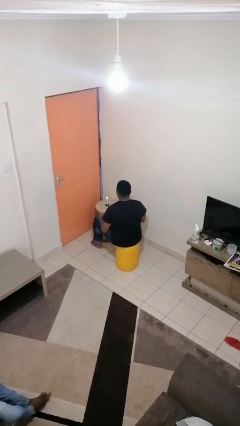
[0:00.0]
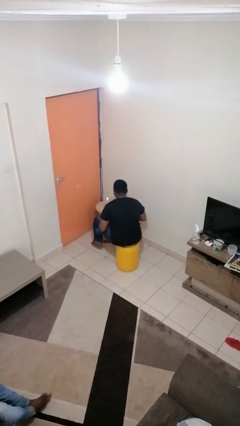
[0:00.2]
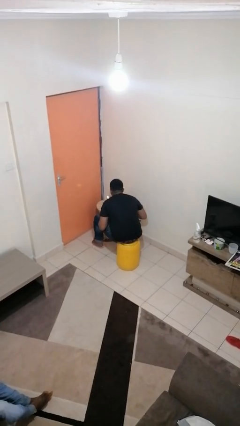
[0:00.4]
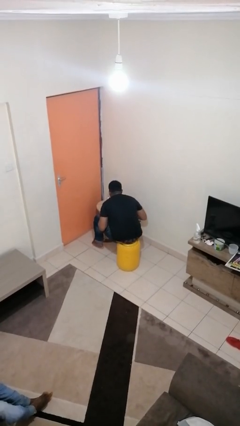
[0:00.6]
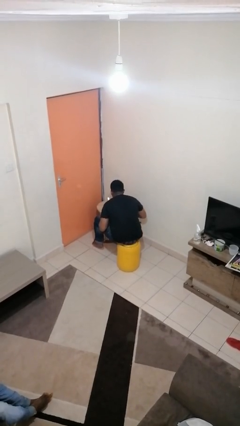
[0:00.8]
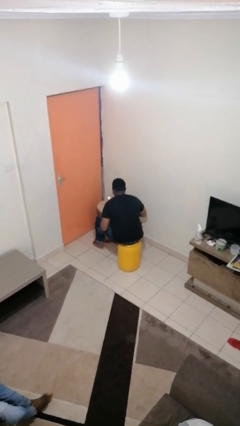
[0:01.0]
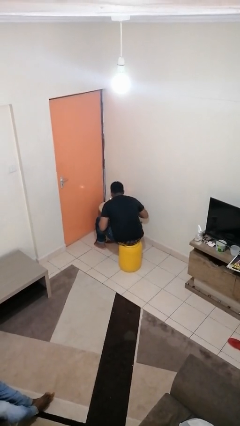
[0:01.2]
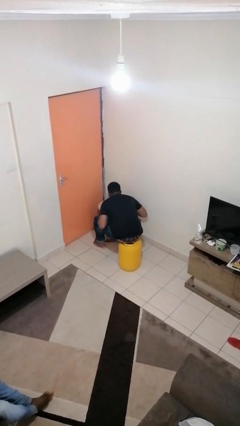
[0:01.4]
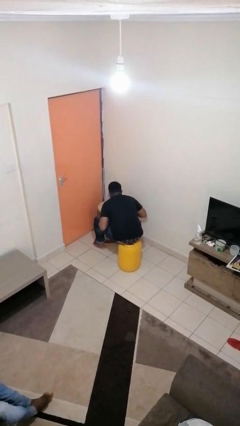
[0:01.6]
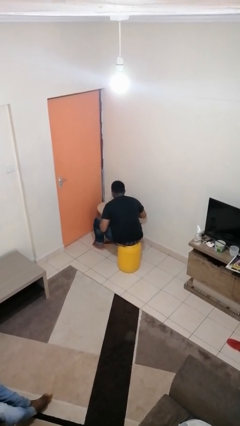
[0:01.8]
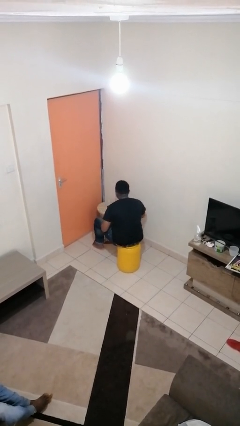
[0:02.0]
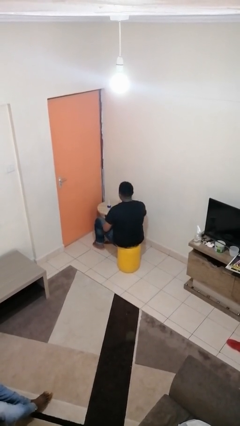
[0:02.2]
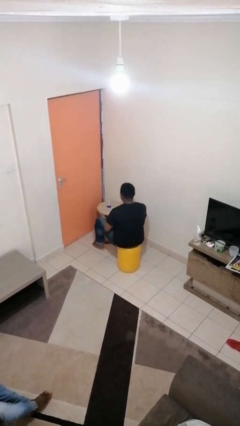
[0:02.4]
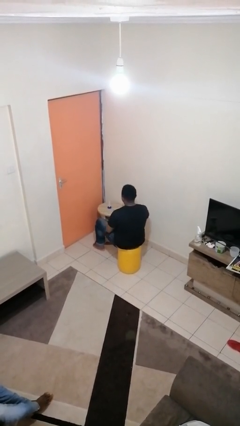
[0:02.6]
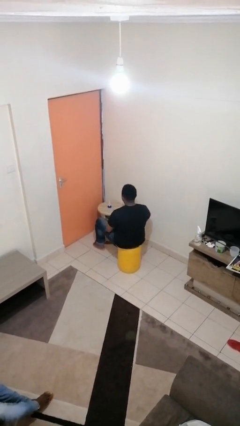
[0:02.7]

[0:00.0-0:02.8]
person extinguishes candle

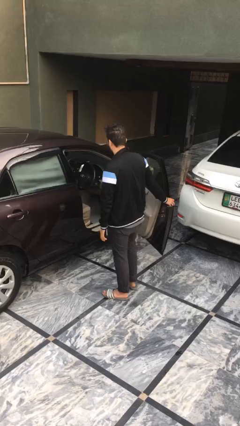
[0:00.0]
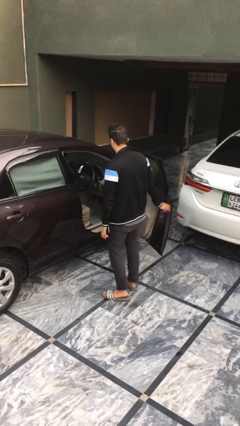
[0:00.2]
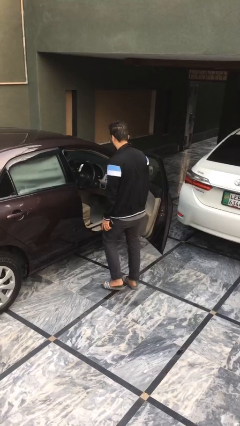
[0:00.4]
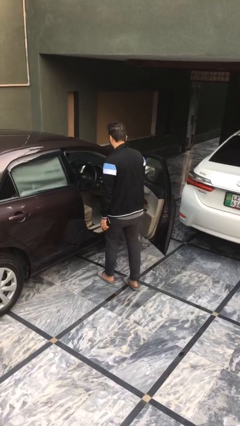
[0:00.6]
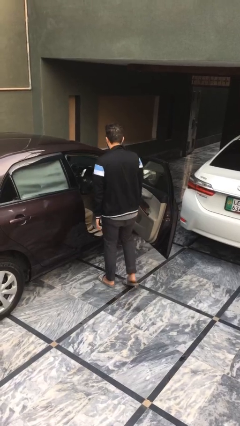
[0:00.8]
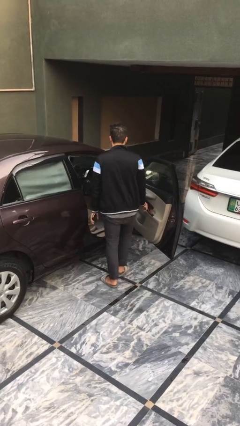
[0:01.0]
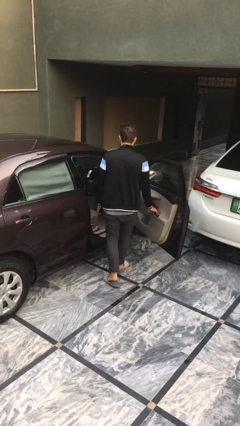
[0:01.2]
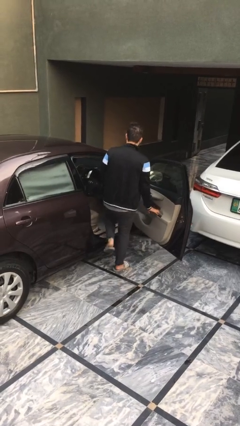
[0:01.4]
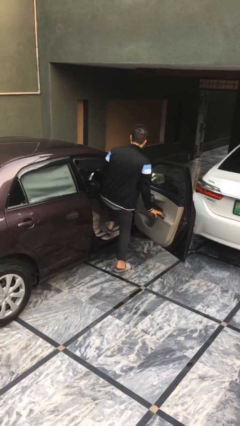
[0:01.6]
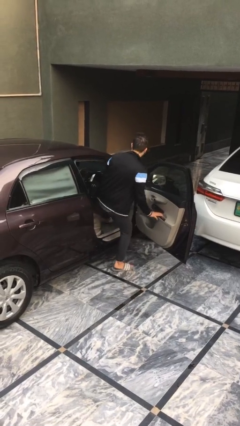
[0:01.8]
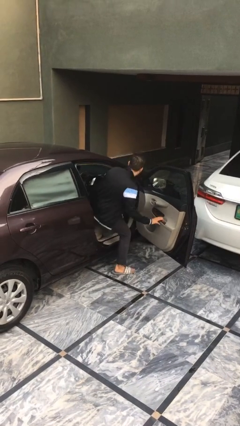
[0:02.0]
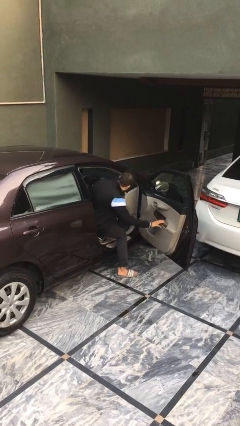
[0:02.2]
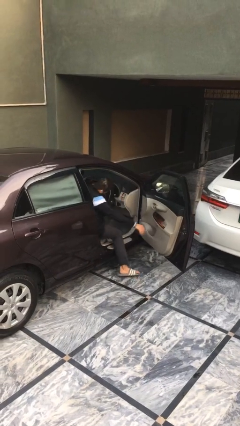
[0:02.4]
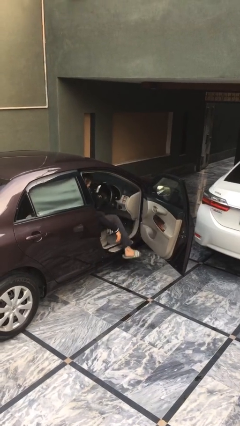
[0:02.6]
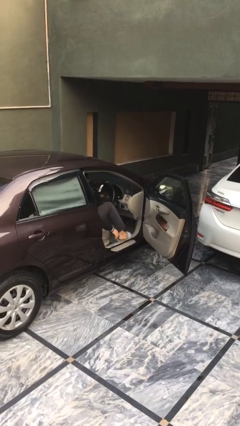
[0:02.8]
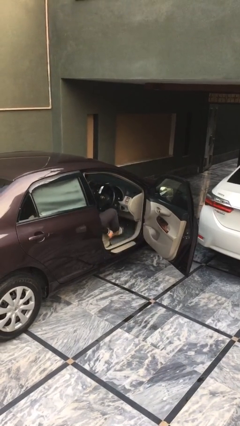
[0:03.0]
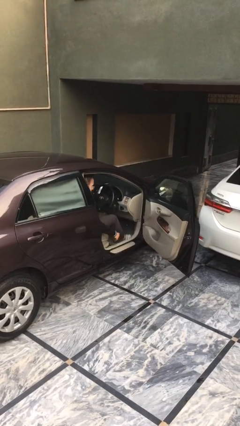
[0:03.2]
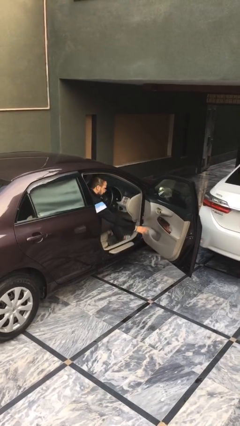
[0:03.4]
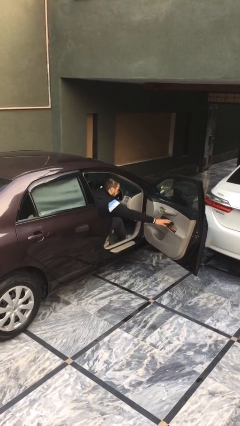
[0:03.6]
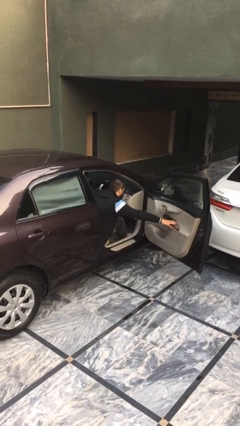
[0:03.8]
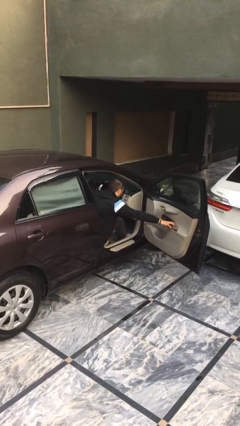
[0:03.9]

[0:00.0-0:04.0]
person enters car

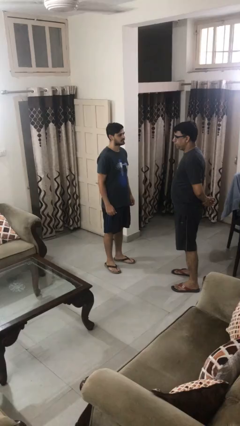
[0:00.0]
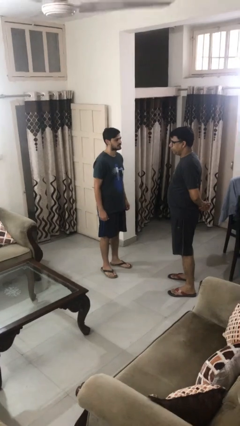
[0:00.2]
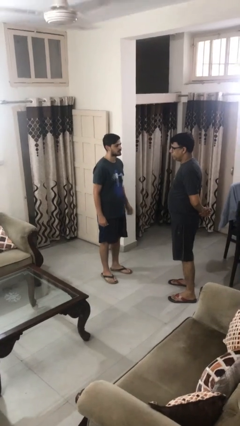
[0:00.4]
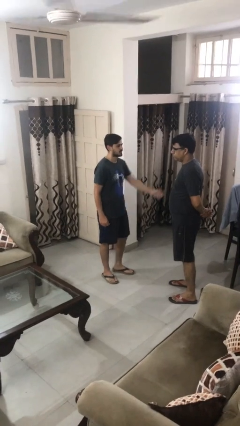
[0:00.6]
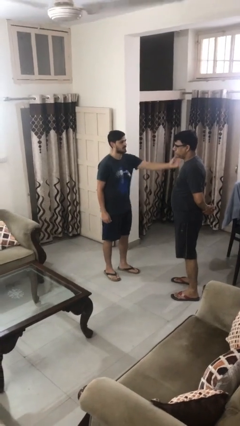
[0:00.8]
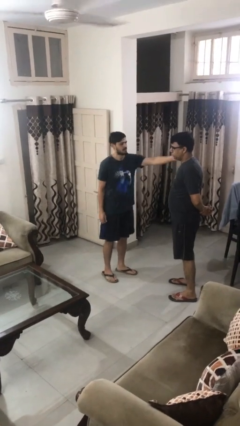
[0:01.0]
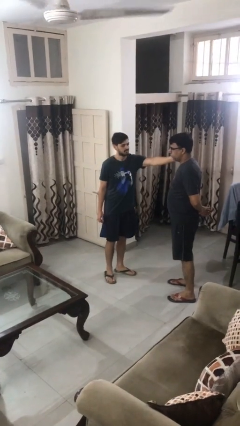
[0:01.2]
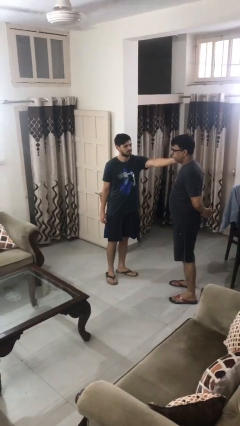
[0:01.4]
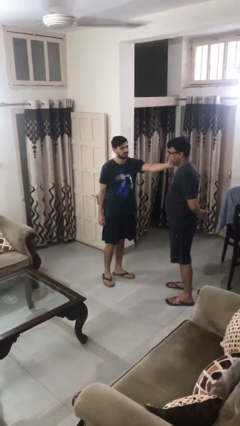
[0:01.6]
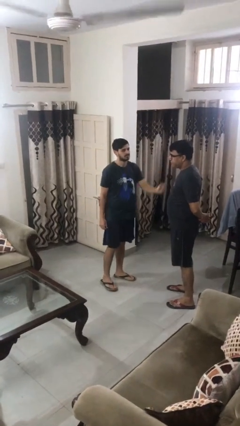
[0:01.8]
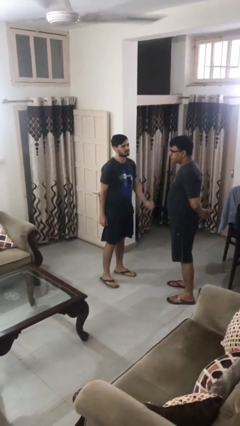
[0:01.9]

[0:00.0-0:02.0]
person touches face of person

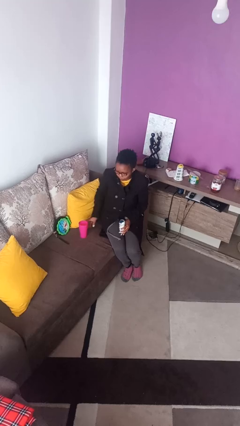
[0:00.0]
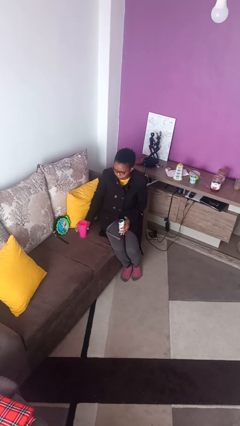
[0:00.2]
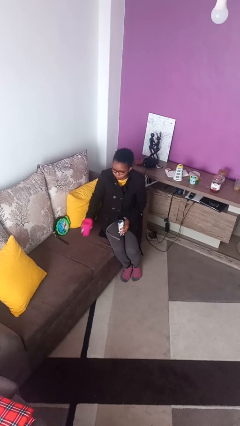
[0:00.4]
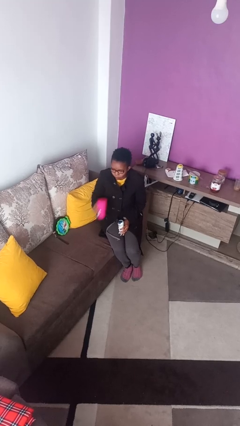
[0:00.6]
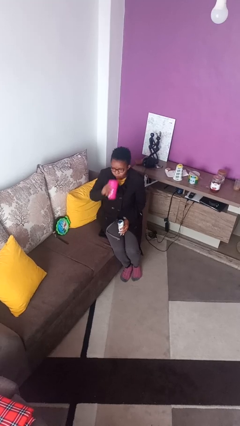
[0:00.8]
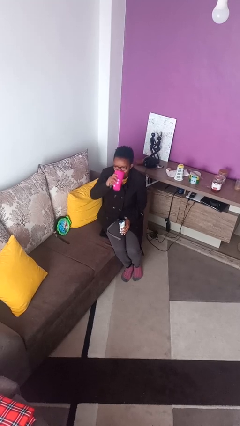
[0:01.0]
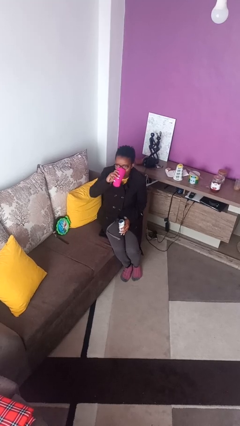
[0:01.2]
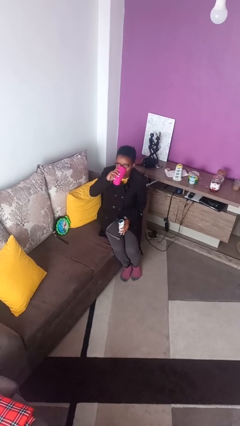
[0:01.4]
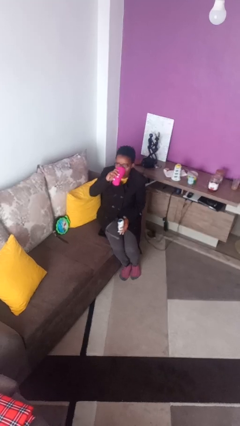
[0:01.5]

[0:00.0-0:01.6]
person drinks from cup

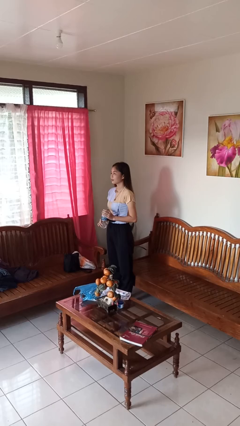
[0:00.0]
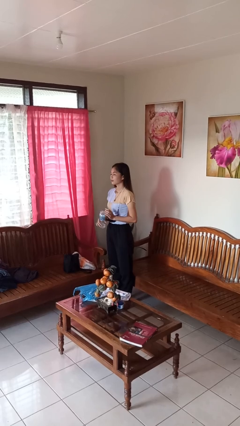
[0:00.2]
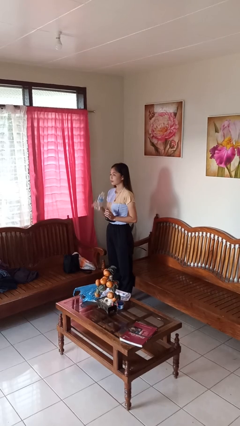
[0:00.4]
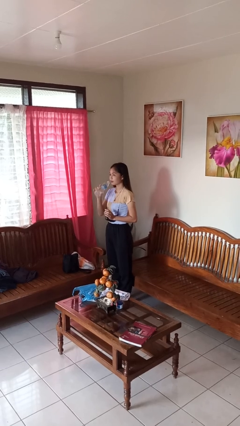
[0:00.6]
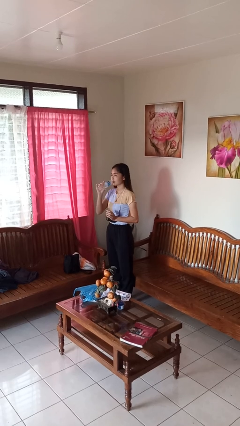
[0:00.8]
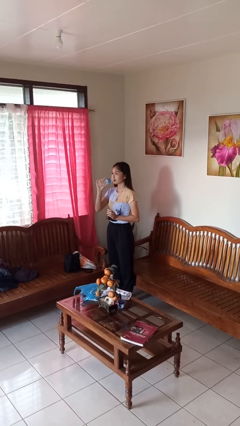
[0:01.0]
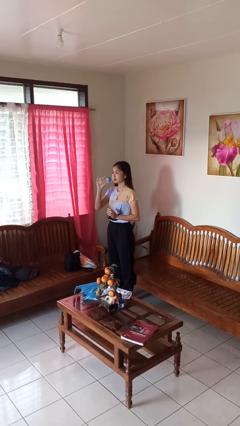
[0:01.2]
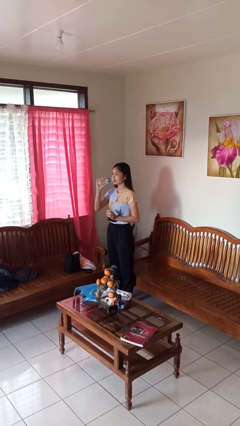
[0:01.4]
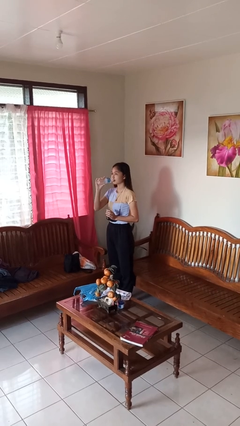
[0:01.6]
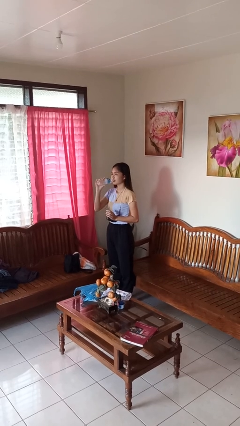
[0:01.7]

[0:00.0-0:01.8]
person drinks from bottle

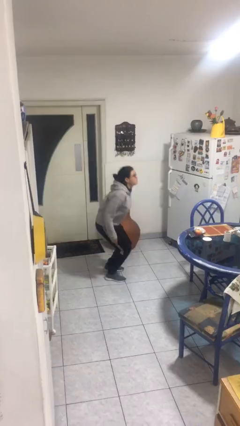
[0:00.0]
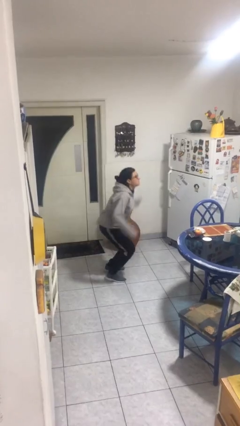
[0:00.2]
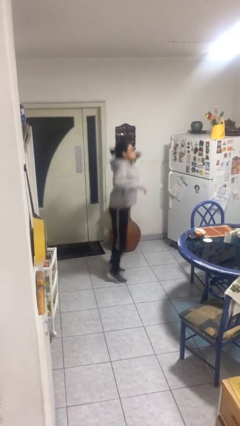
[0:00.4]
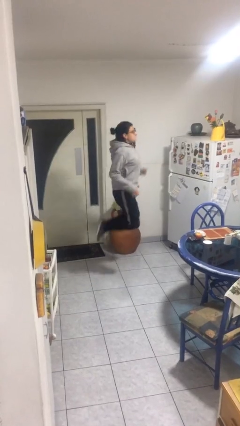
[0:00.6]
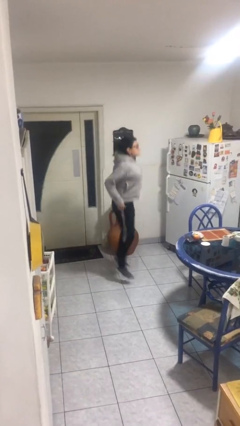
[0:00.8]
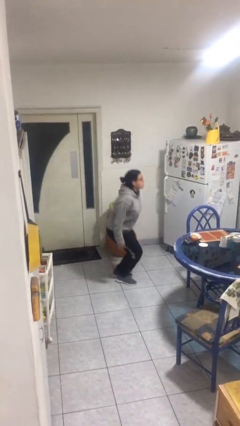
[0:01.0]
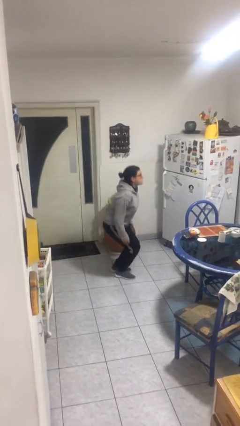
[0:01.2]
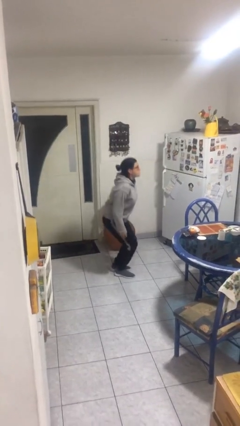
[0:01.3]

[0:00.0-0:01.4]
person jumps

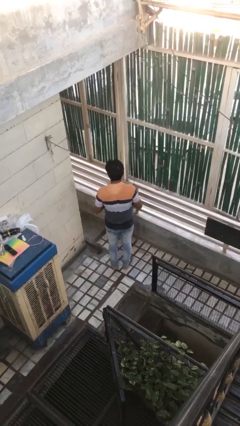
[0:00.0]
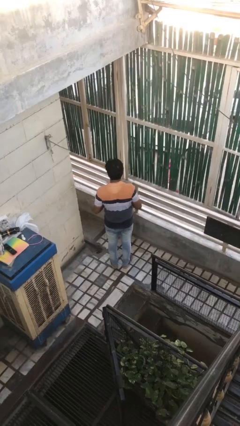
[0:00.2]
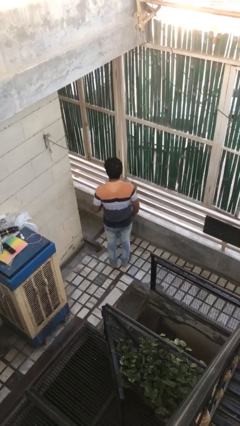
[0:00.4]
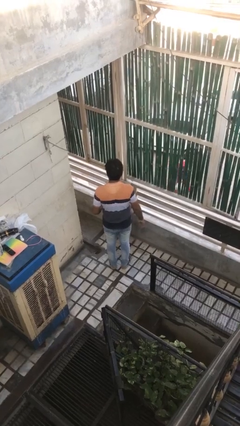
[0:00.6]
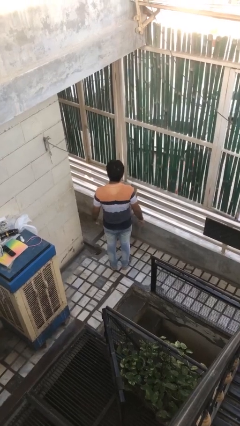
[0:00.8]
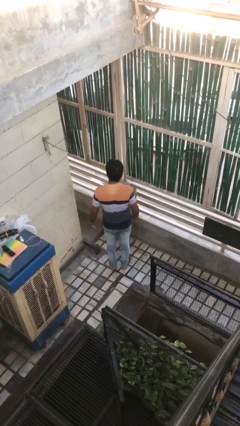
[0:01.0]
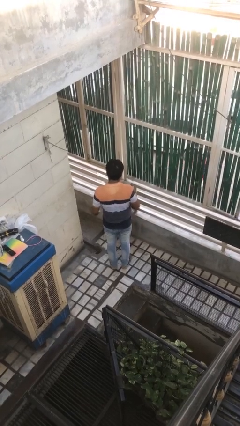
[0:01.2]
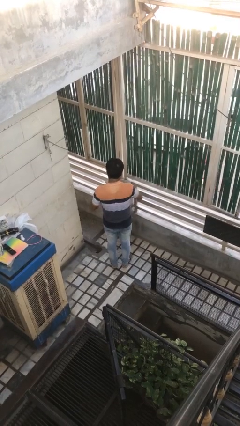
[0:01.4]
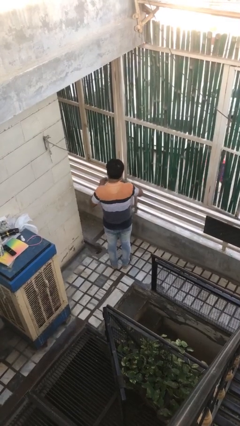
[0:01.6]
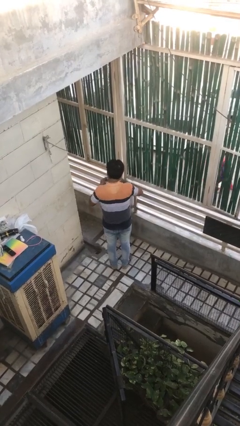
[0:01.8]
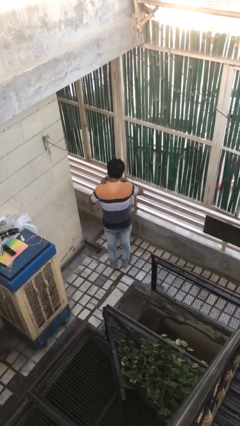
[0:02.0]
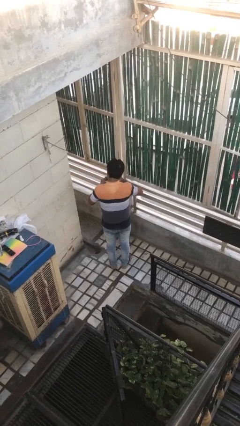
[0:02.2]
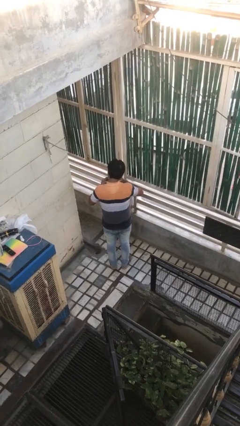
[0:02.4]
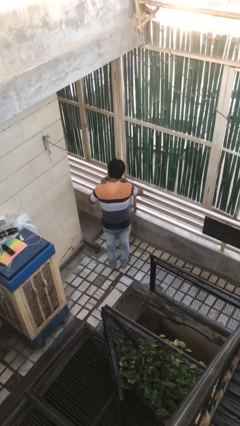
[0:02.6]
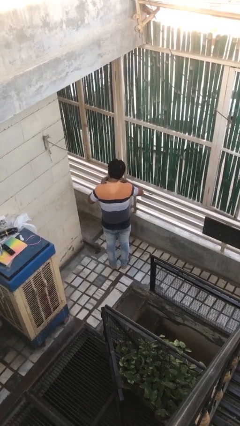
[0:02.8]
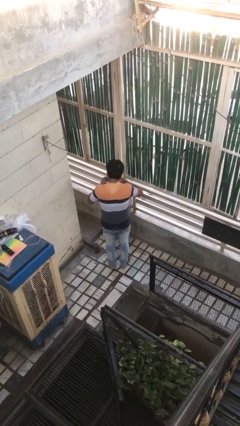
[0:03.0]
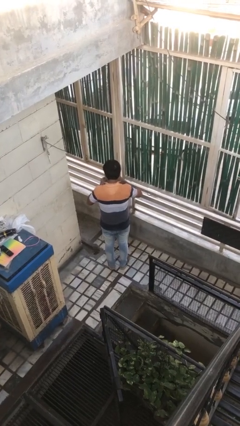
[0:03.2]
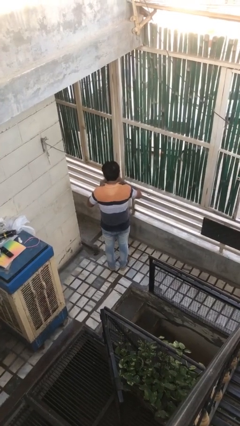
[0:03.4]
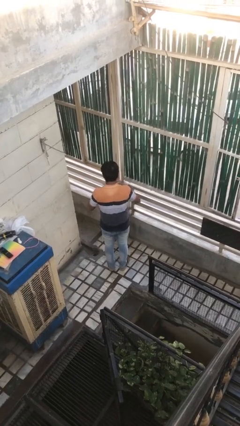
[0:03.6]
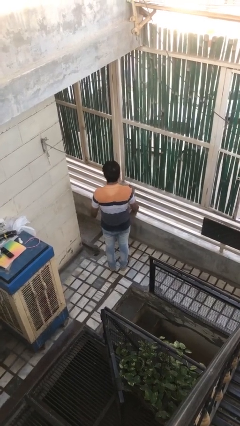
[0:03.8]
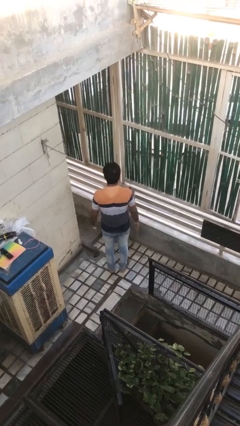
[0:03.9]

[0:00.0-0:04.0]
person clips fingernails
